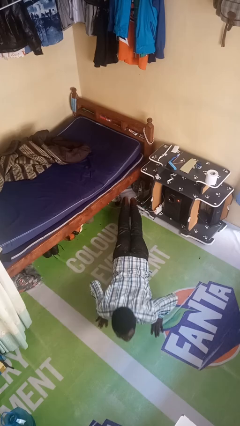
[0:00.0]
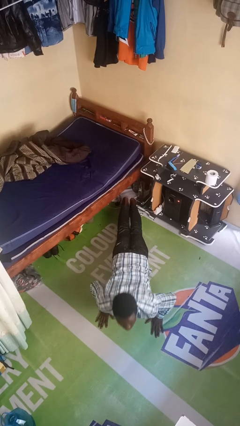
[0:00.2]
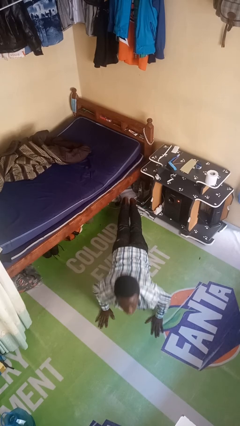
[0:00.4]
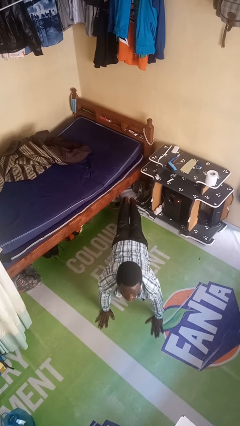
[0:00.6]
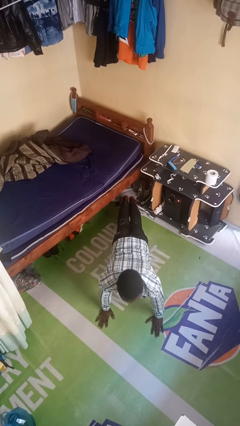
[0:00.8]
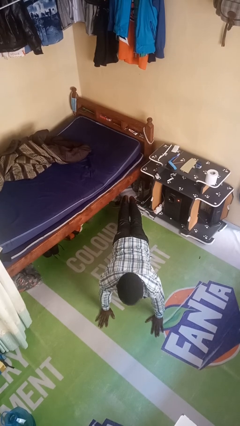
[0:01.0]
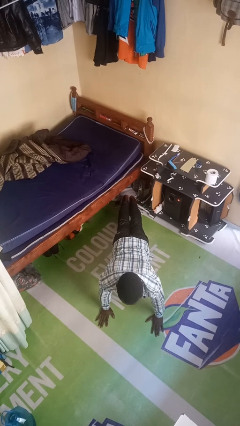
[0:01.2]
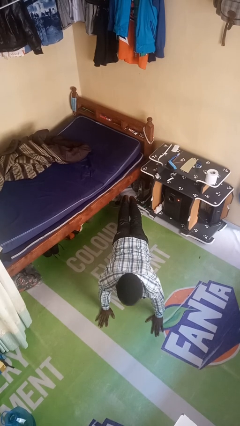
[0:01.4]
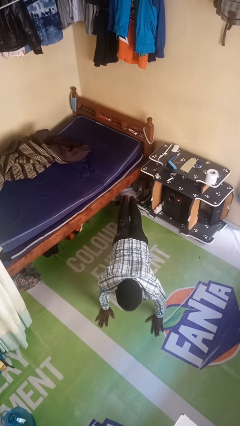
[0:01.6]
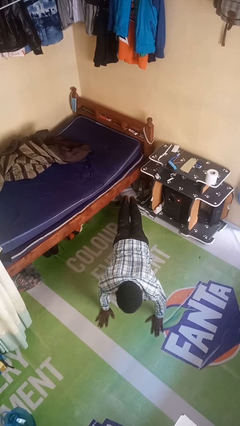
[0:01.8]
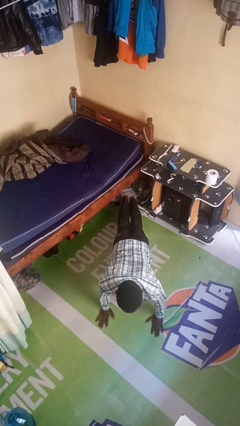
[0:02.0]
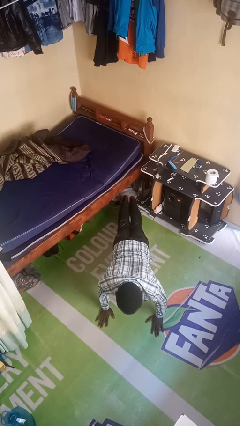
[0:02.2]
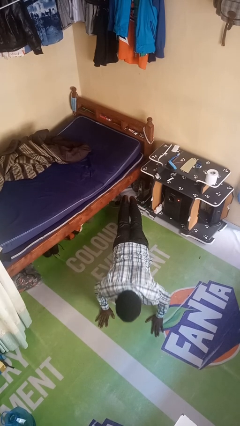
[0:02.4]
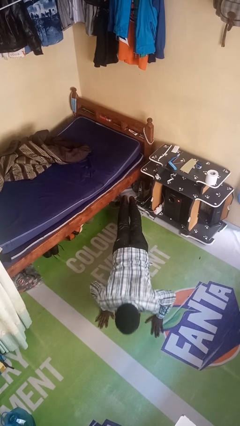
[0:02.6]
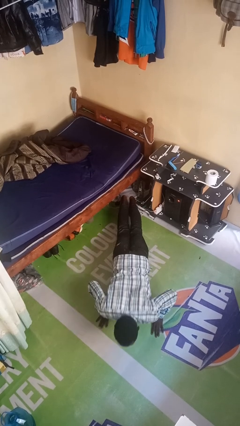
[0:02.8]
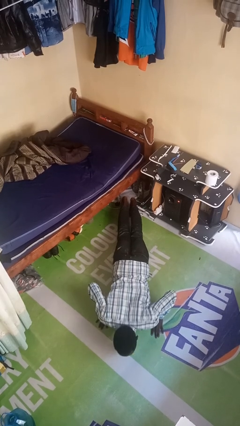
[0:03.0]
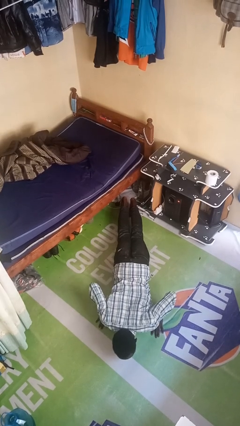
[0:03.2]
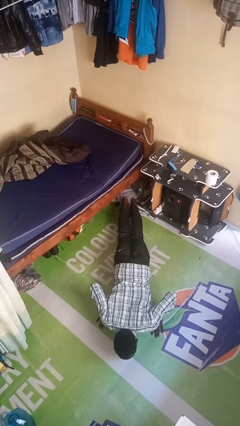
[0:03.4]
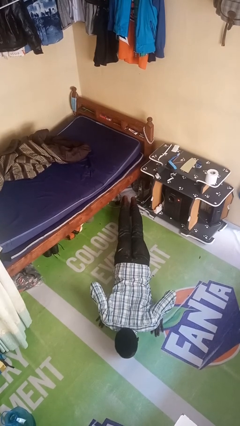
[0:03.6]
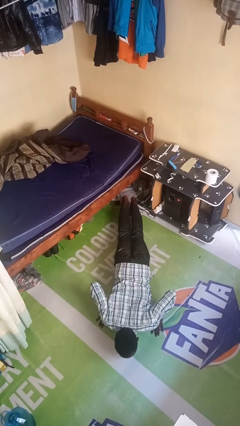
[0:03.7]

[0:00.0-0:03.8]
person exercises with pushup

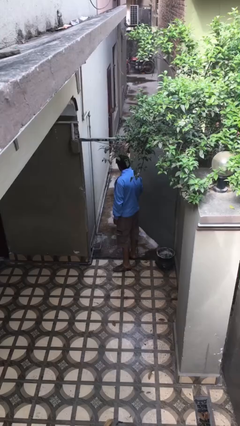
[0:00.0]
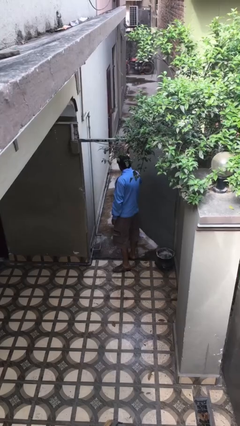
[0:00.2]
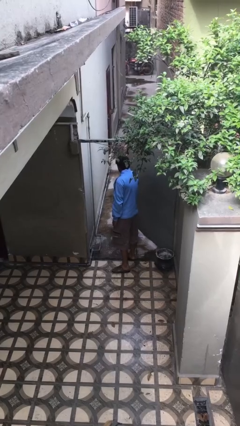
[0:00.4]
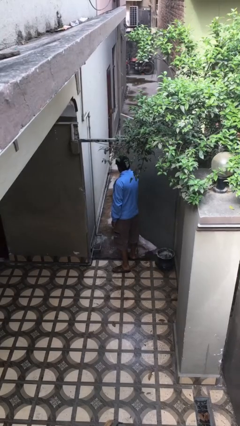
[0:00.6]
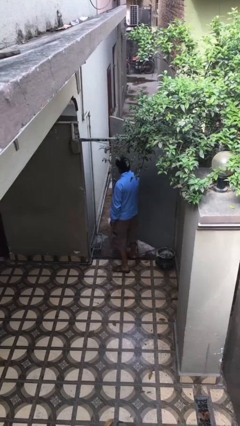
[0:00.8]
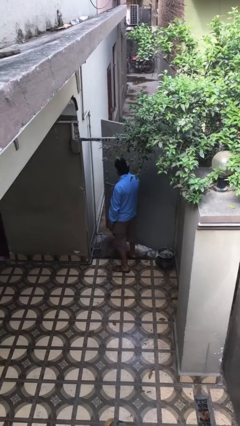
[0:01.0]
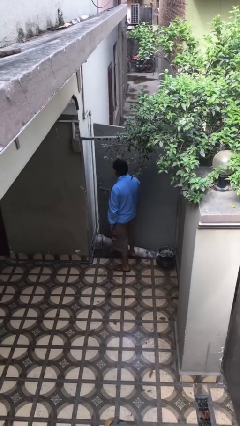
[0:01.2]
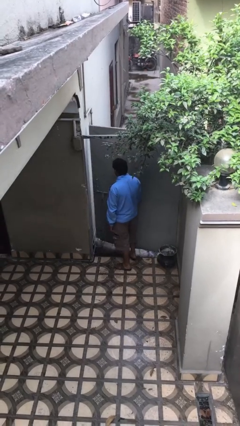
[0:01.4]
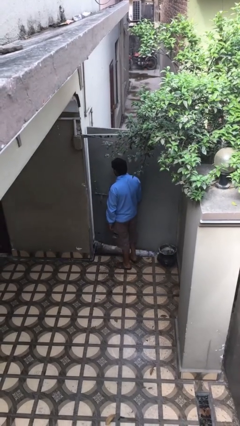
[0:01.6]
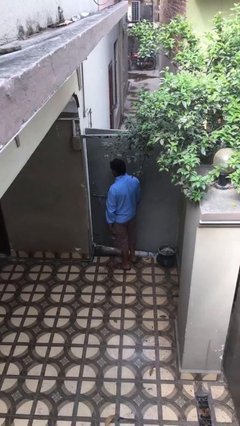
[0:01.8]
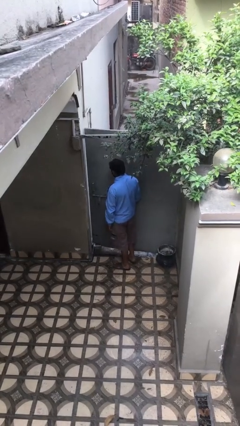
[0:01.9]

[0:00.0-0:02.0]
person closes facility door

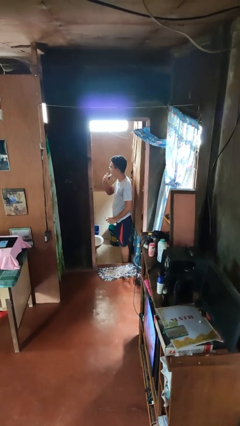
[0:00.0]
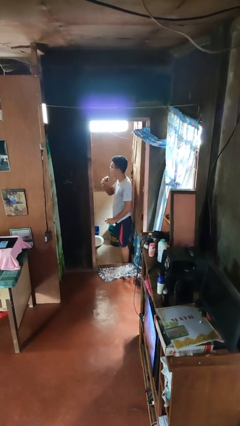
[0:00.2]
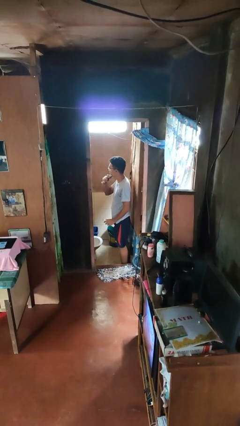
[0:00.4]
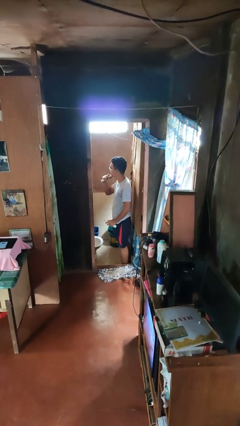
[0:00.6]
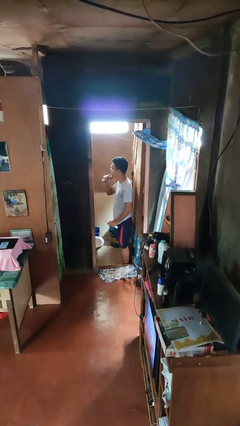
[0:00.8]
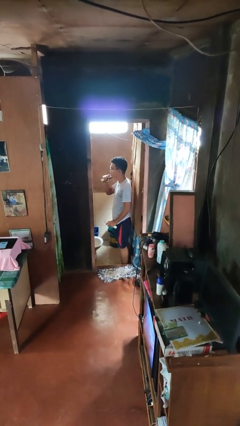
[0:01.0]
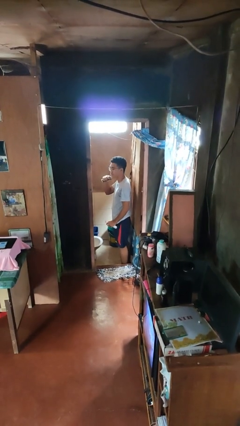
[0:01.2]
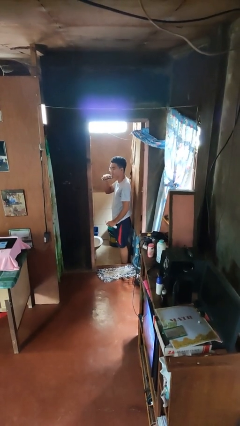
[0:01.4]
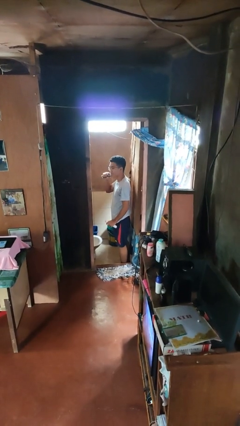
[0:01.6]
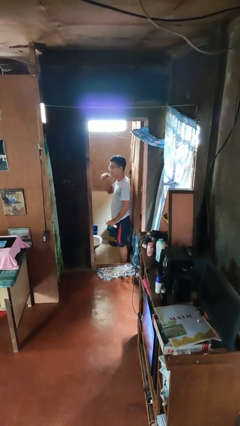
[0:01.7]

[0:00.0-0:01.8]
person shaves face

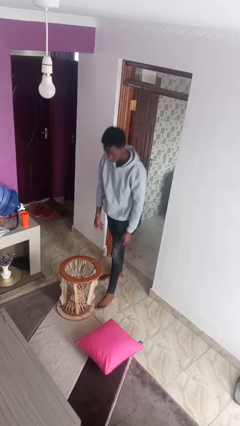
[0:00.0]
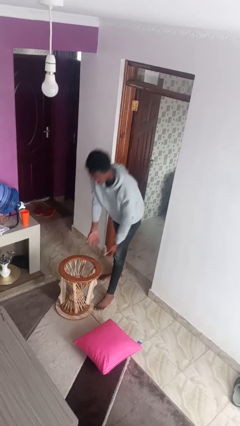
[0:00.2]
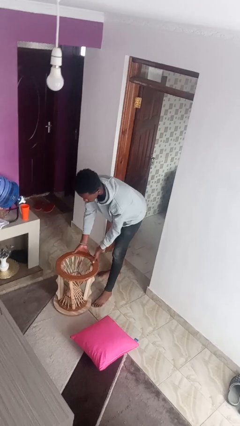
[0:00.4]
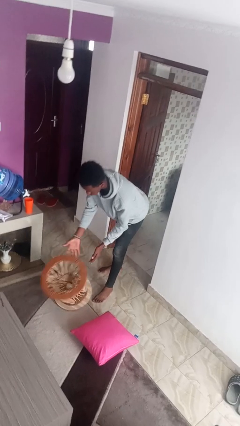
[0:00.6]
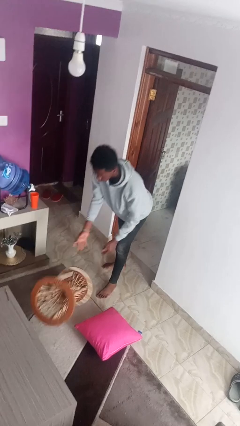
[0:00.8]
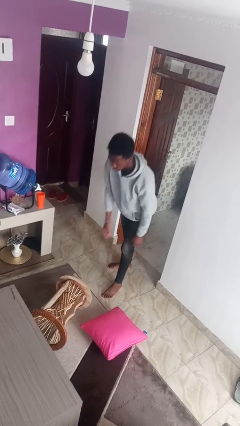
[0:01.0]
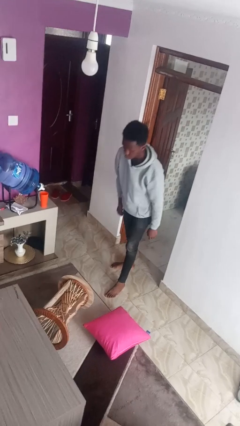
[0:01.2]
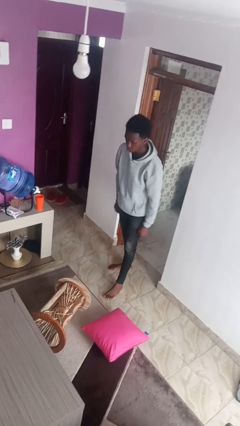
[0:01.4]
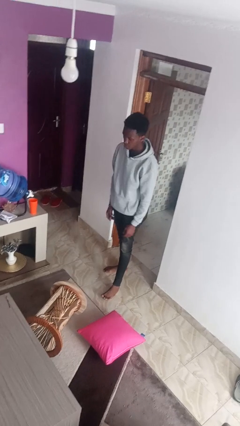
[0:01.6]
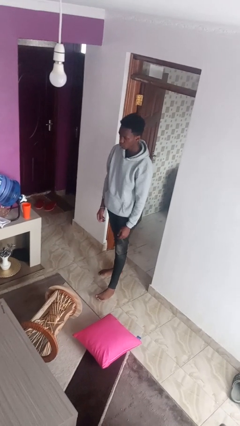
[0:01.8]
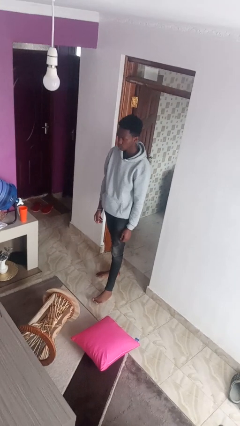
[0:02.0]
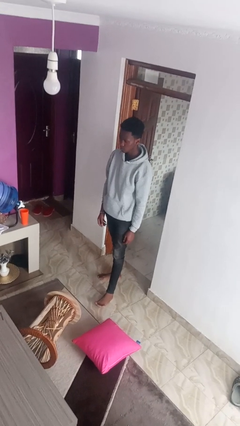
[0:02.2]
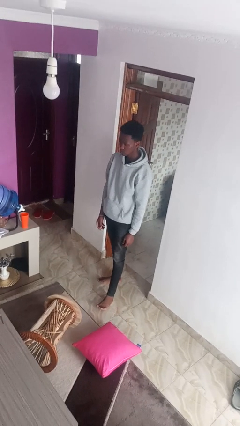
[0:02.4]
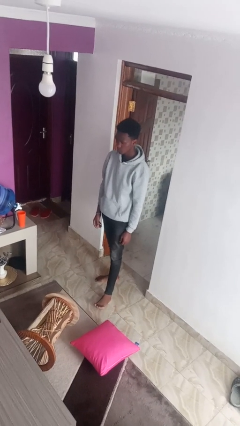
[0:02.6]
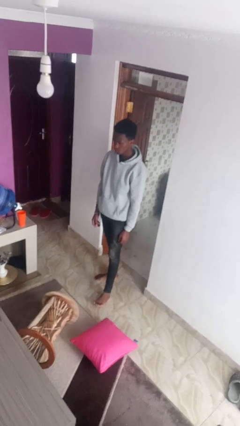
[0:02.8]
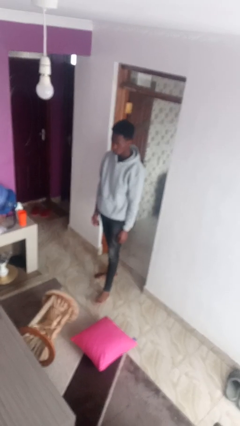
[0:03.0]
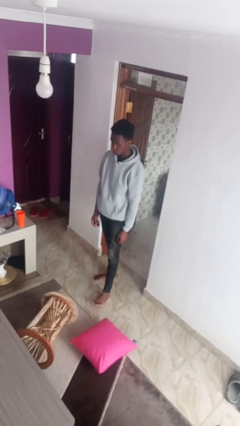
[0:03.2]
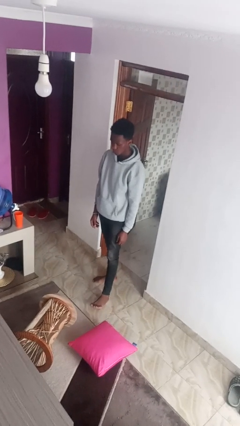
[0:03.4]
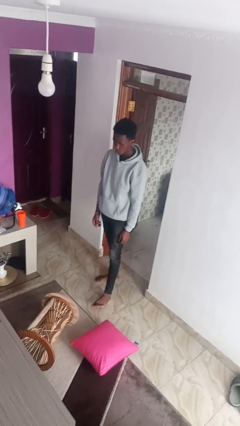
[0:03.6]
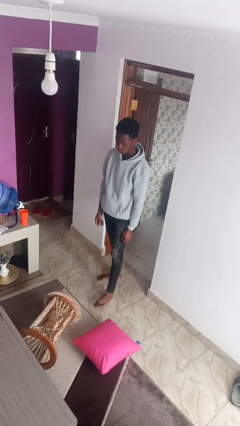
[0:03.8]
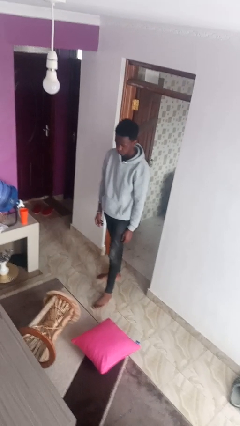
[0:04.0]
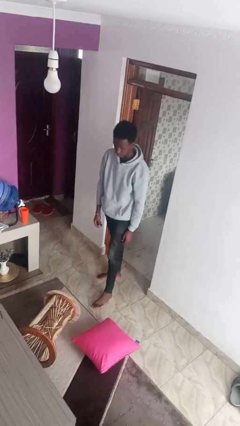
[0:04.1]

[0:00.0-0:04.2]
person knocks over furniture

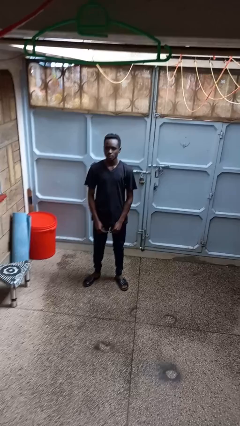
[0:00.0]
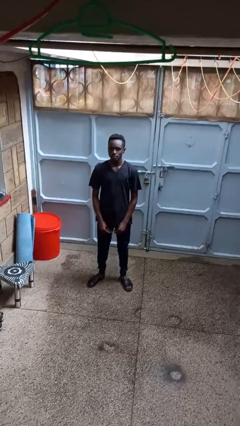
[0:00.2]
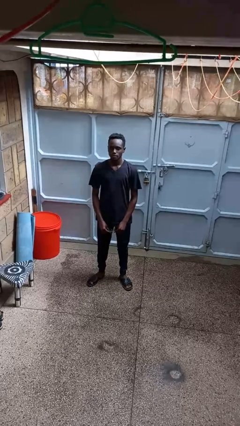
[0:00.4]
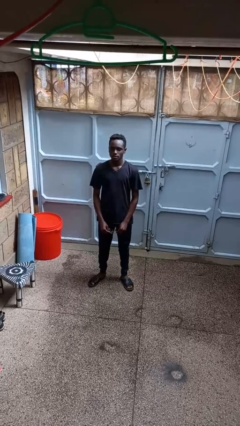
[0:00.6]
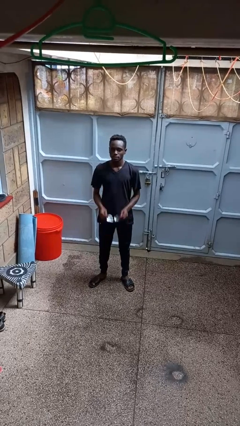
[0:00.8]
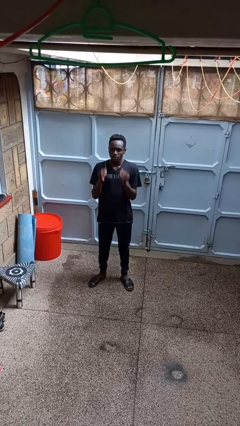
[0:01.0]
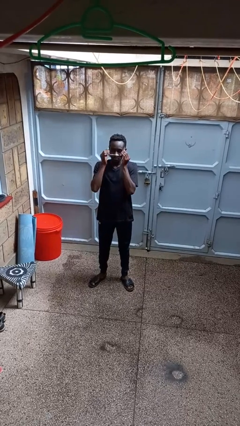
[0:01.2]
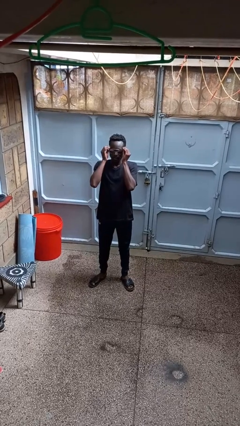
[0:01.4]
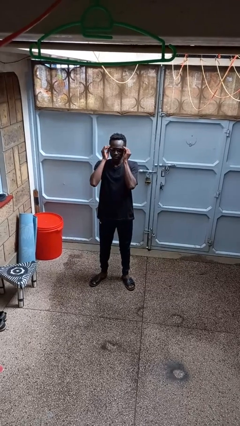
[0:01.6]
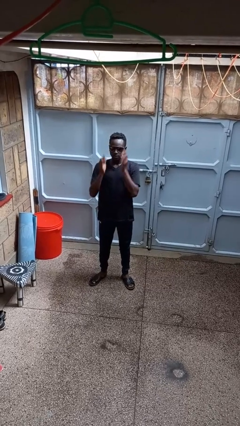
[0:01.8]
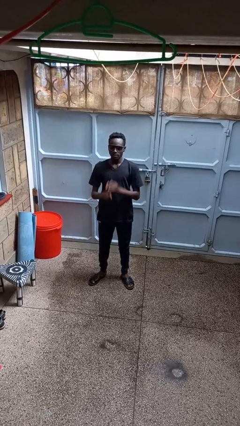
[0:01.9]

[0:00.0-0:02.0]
person puts on sunglasses

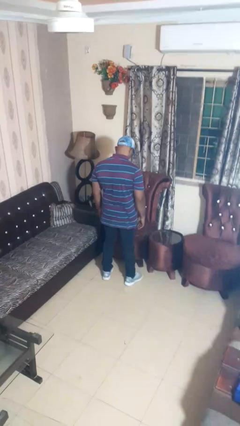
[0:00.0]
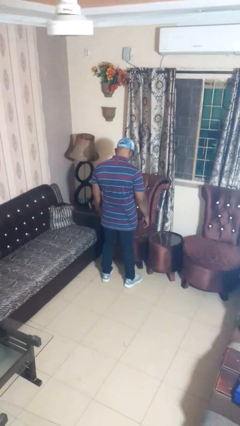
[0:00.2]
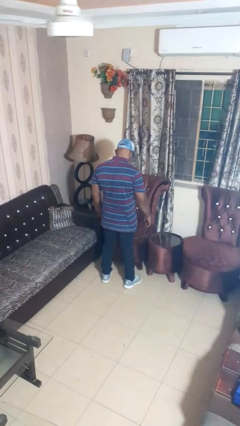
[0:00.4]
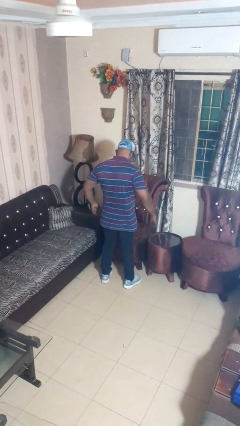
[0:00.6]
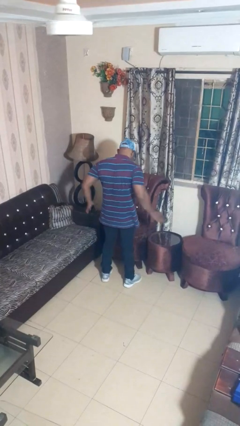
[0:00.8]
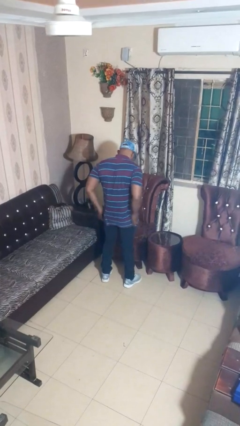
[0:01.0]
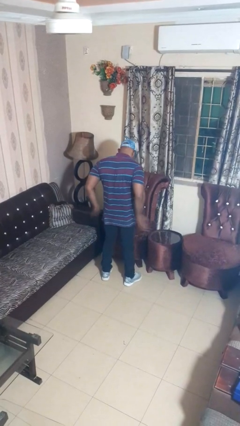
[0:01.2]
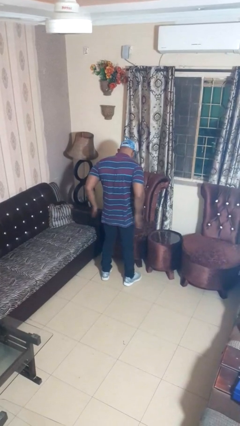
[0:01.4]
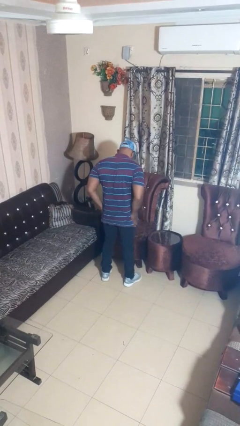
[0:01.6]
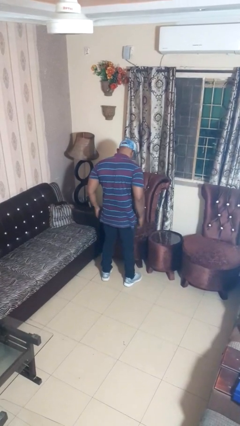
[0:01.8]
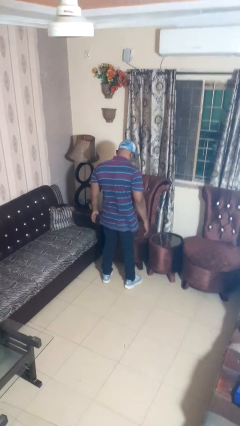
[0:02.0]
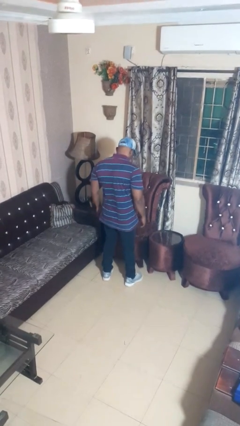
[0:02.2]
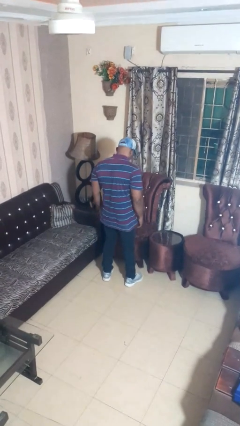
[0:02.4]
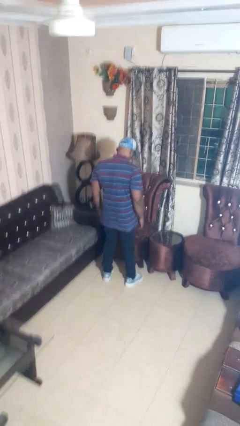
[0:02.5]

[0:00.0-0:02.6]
person slaps hands on thighs

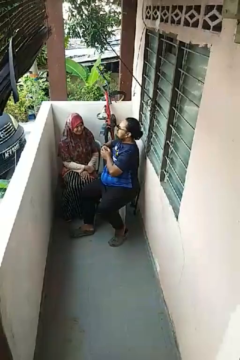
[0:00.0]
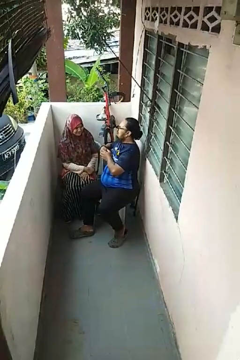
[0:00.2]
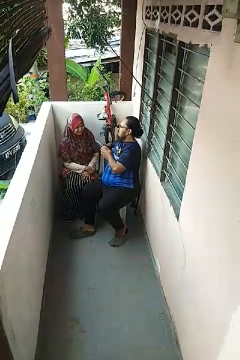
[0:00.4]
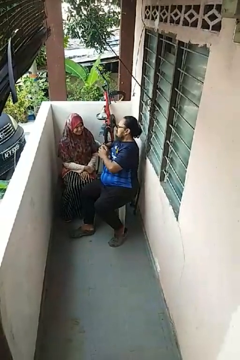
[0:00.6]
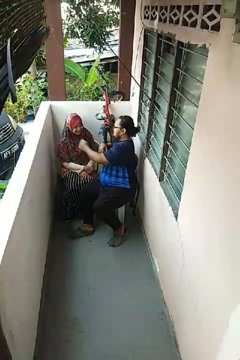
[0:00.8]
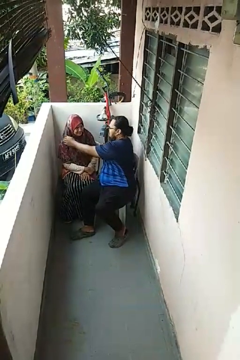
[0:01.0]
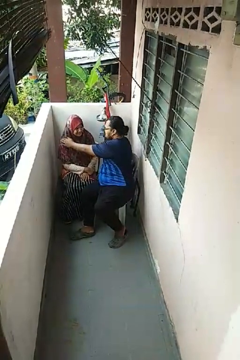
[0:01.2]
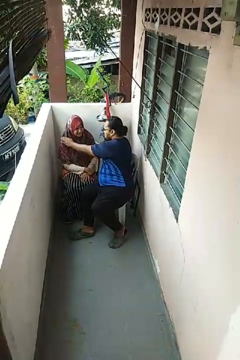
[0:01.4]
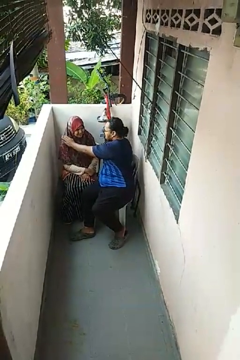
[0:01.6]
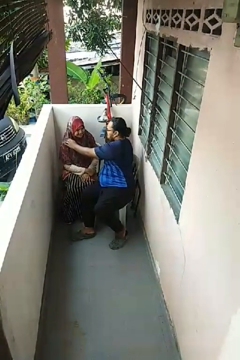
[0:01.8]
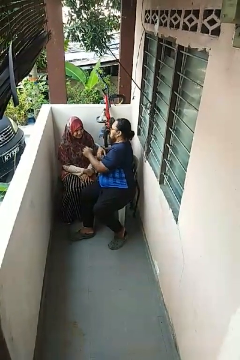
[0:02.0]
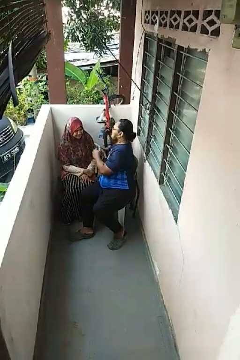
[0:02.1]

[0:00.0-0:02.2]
person pounds shoulders of person
